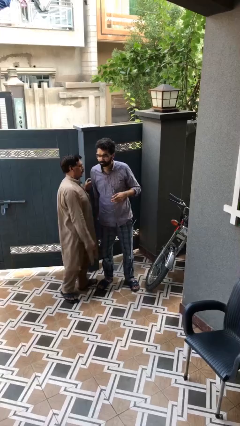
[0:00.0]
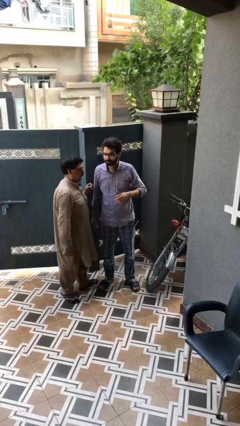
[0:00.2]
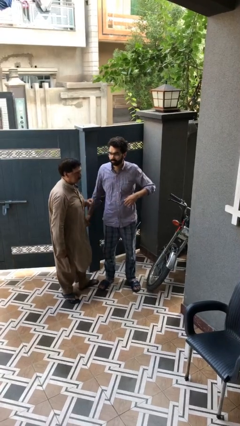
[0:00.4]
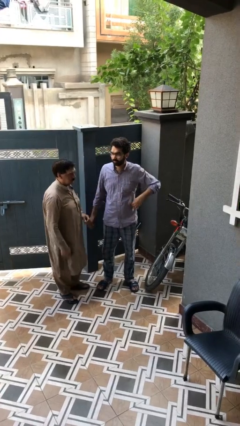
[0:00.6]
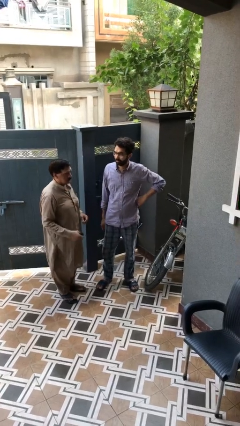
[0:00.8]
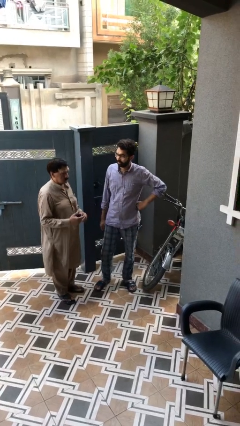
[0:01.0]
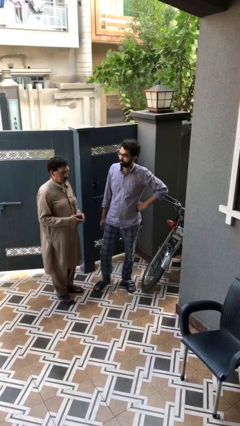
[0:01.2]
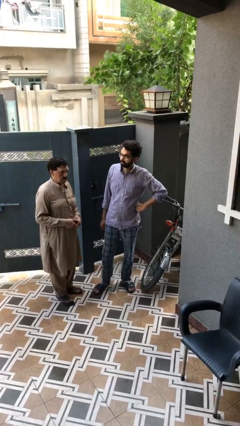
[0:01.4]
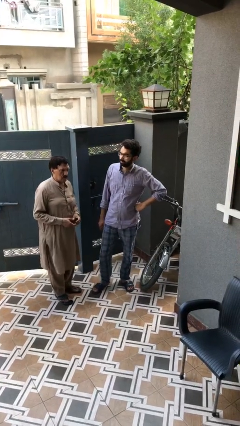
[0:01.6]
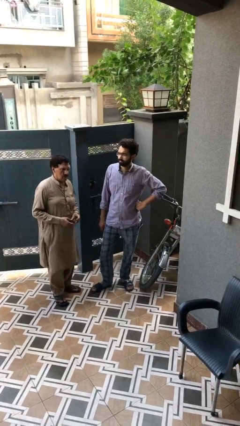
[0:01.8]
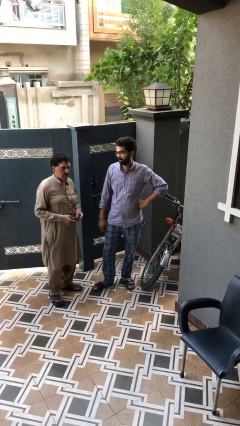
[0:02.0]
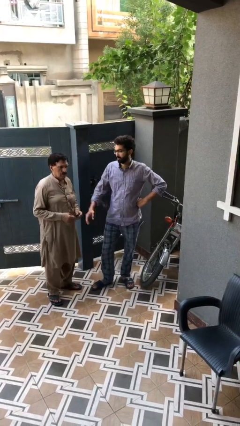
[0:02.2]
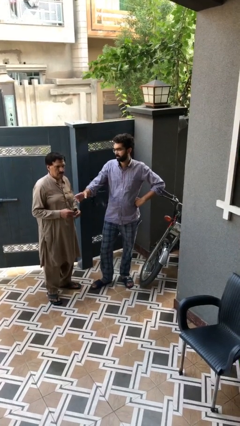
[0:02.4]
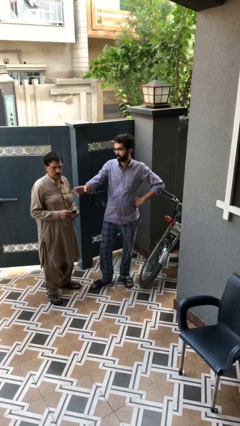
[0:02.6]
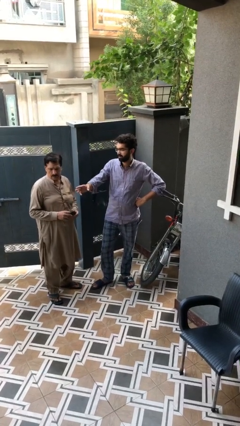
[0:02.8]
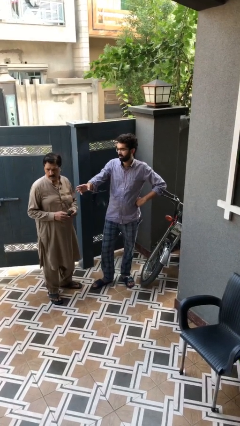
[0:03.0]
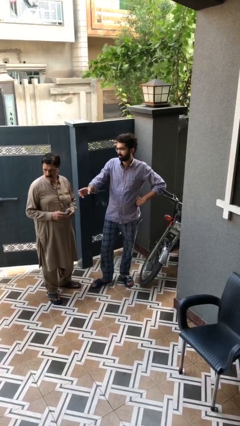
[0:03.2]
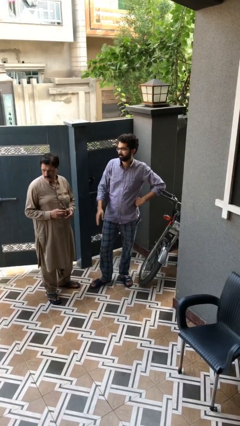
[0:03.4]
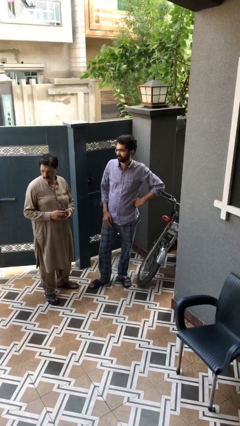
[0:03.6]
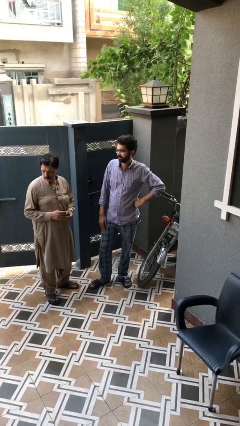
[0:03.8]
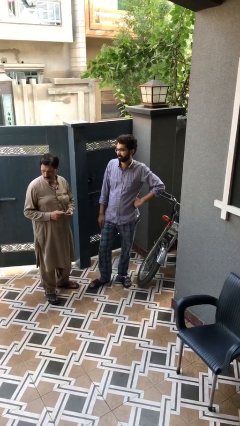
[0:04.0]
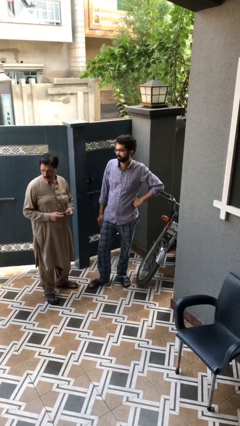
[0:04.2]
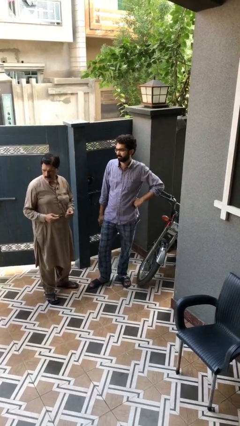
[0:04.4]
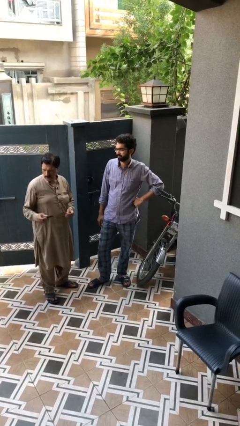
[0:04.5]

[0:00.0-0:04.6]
person talks to person

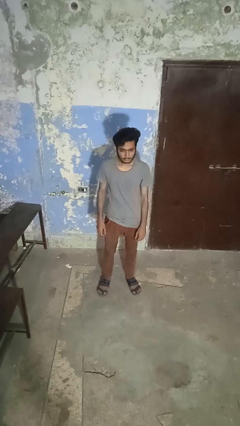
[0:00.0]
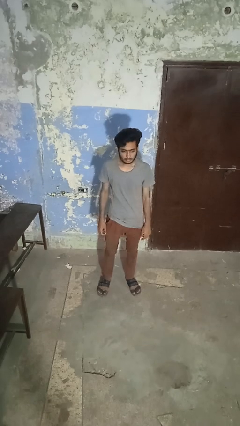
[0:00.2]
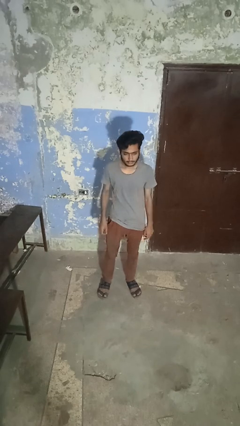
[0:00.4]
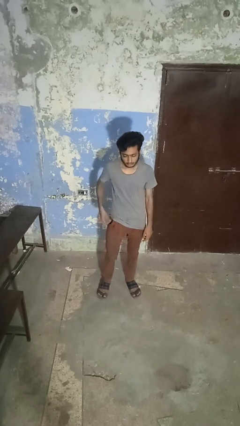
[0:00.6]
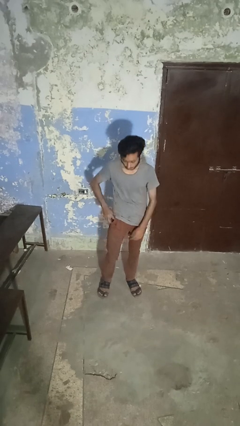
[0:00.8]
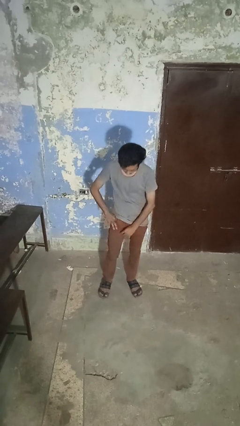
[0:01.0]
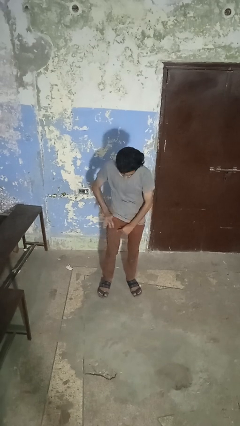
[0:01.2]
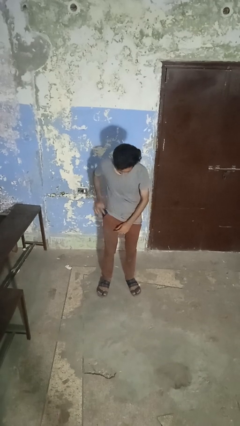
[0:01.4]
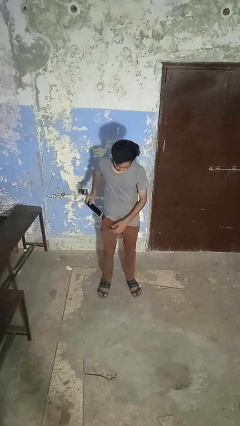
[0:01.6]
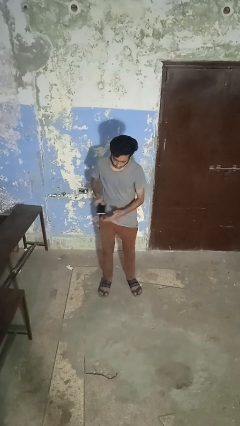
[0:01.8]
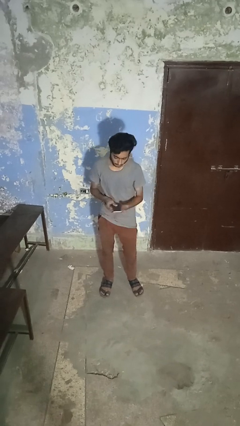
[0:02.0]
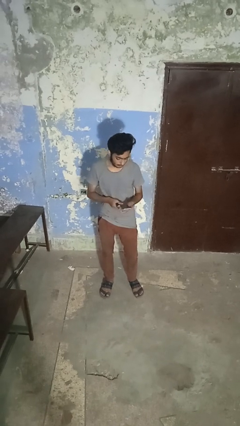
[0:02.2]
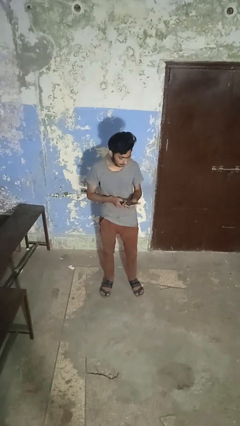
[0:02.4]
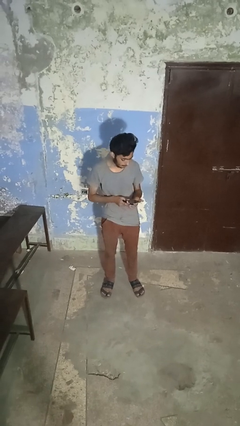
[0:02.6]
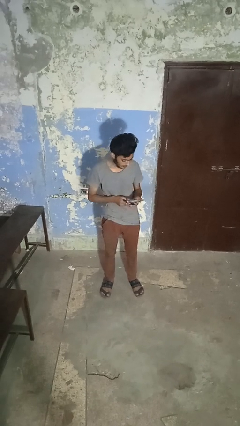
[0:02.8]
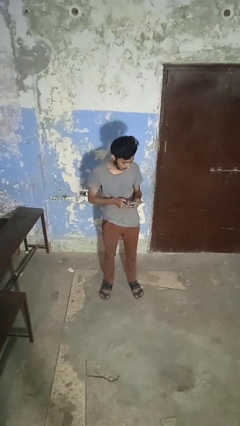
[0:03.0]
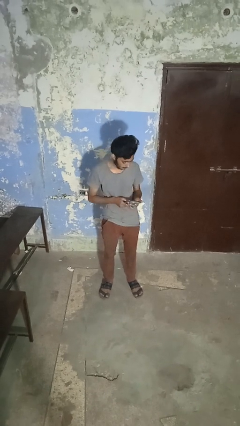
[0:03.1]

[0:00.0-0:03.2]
person takes phone from pocket

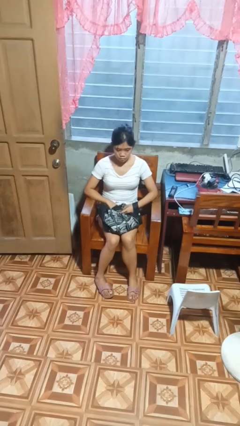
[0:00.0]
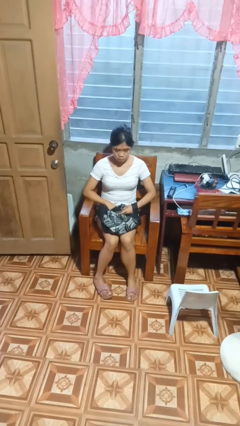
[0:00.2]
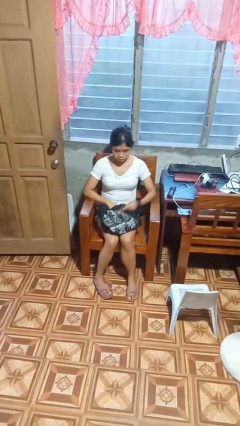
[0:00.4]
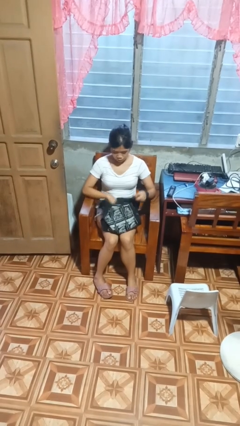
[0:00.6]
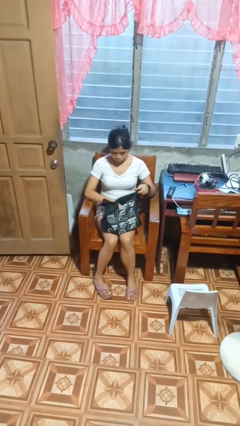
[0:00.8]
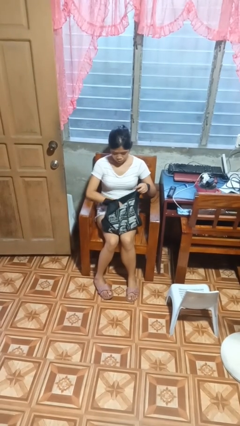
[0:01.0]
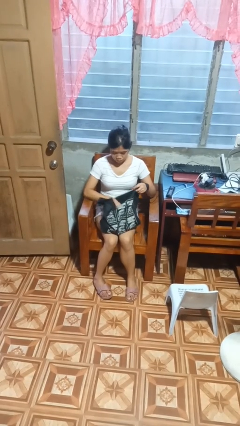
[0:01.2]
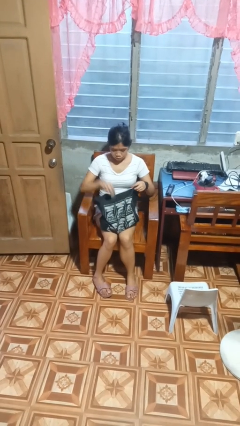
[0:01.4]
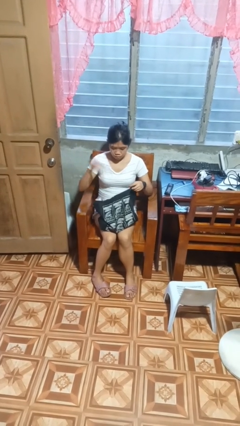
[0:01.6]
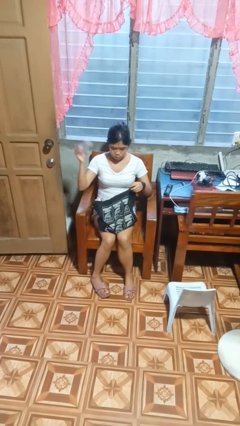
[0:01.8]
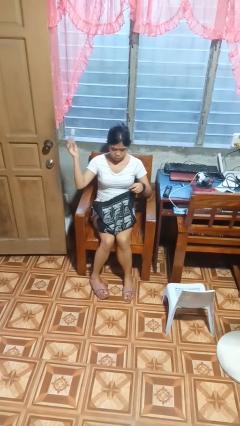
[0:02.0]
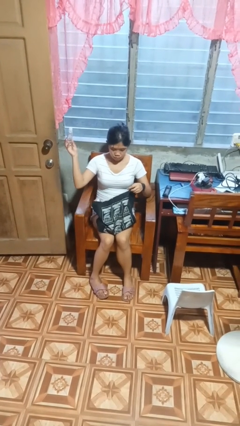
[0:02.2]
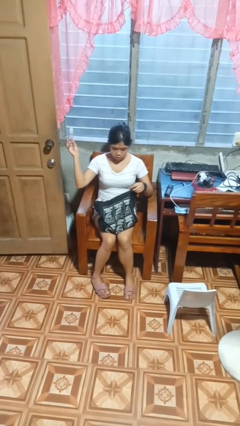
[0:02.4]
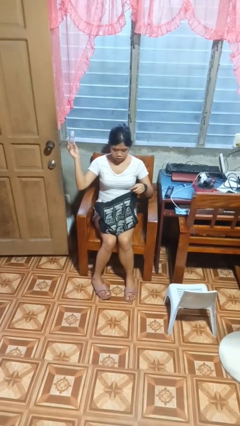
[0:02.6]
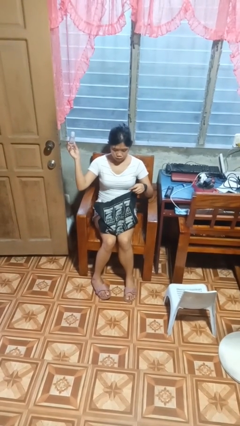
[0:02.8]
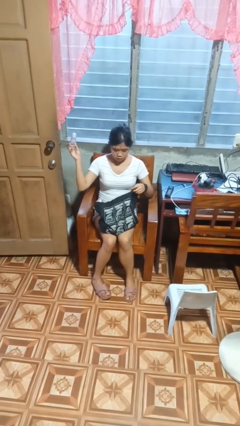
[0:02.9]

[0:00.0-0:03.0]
person searches in bag

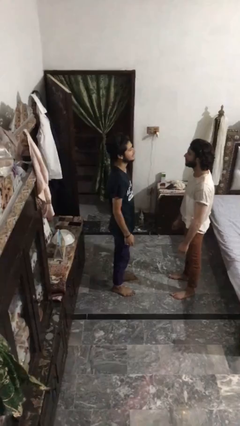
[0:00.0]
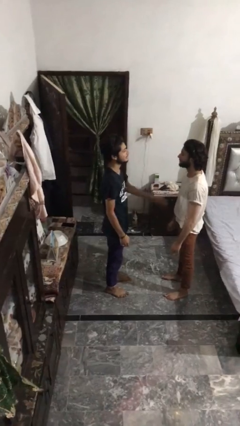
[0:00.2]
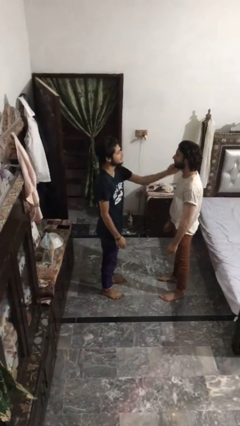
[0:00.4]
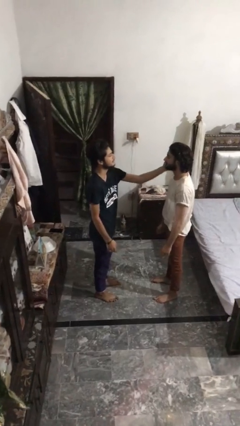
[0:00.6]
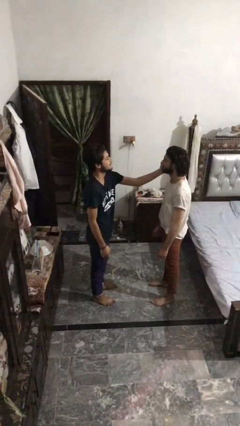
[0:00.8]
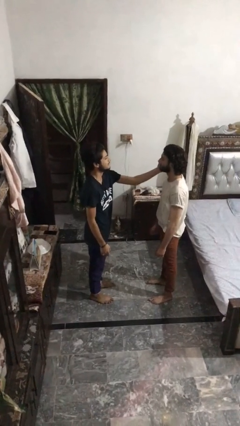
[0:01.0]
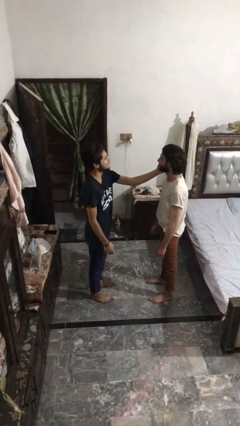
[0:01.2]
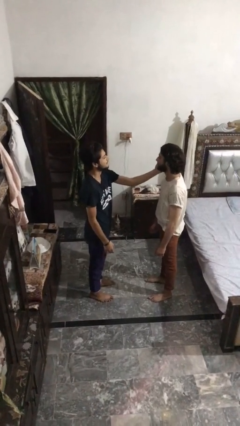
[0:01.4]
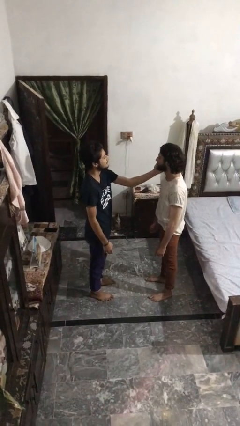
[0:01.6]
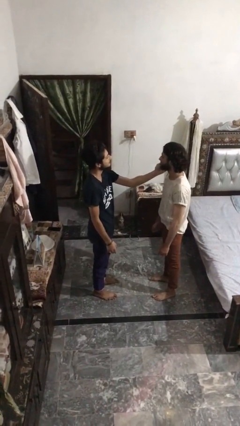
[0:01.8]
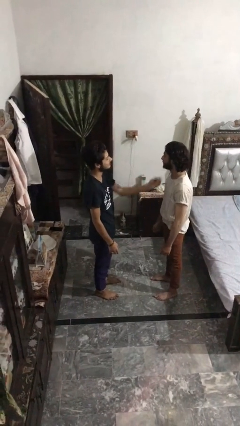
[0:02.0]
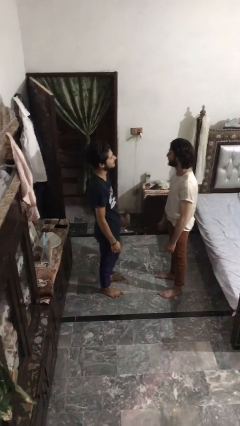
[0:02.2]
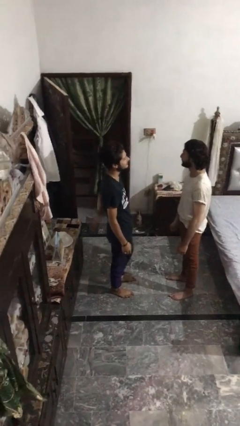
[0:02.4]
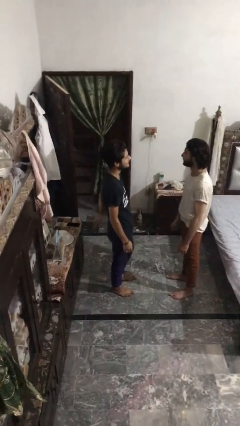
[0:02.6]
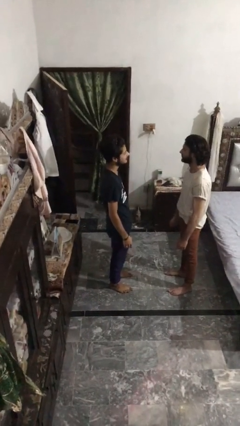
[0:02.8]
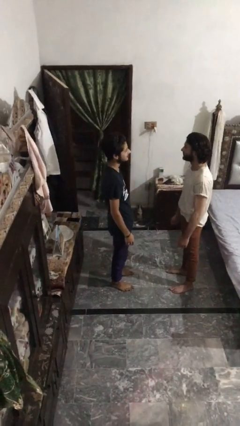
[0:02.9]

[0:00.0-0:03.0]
person touches face of person

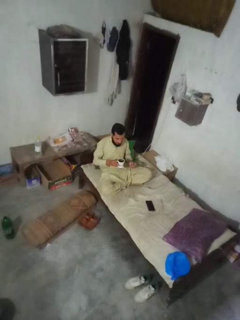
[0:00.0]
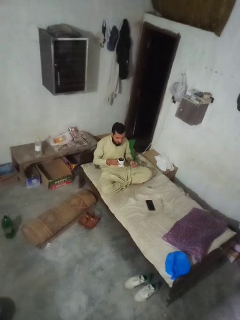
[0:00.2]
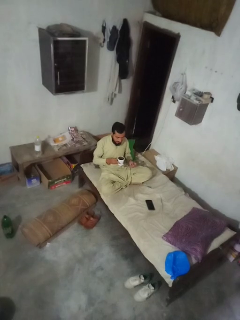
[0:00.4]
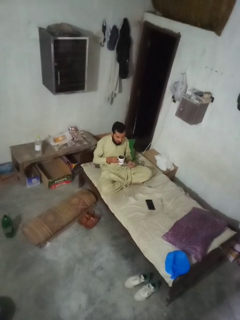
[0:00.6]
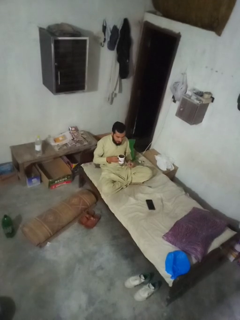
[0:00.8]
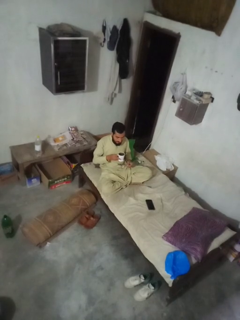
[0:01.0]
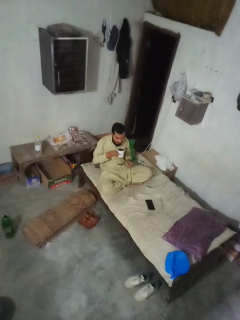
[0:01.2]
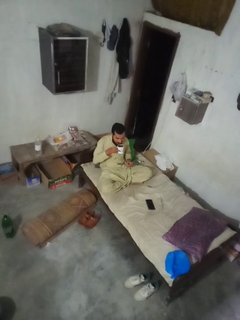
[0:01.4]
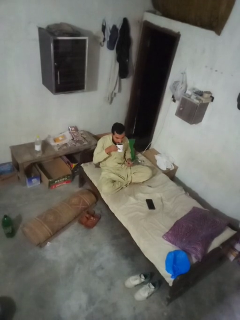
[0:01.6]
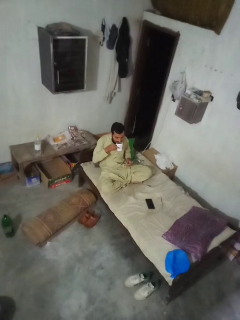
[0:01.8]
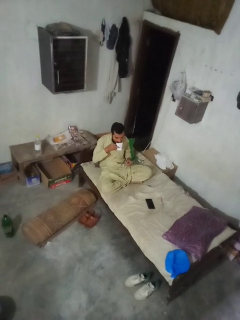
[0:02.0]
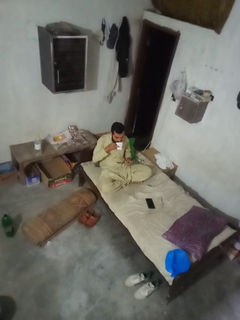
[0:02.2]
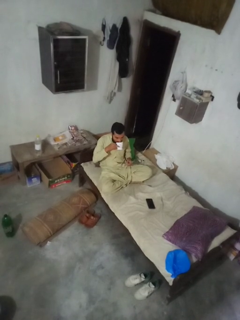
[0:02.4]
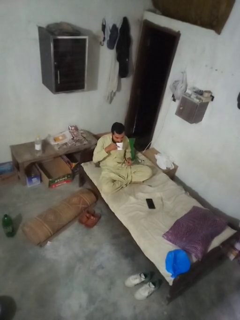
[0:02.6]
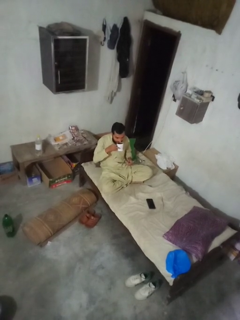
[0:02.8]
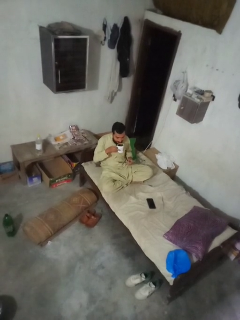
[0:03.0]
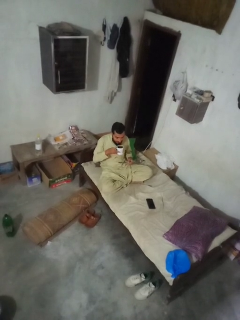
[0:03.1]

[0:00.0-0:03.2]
person drinks from mug

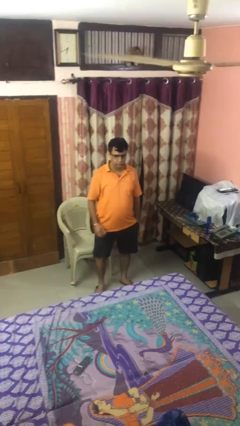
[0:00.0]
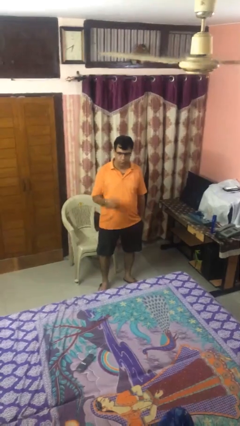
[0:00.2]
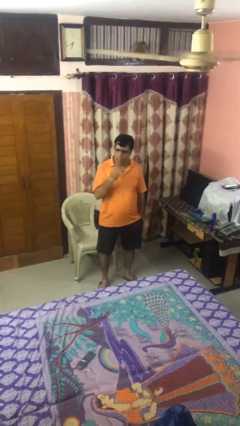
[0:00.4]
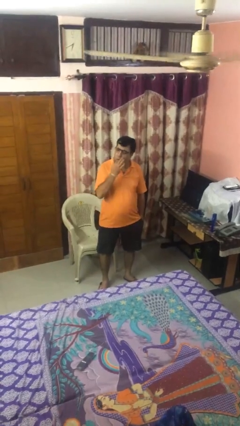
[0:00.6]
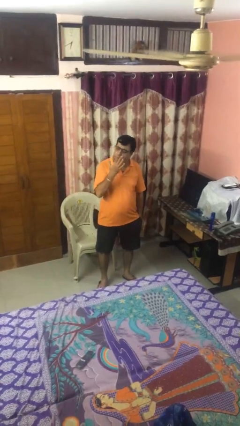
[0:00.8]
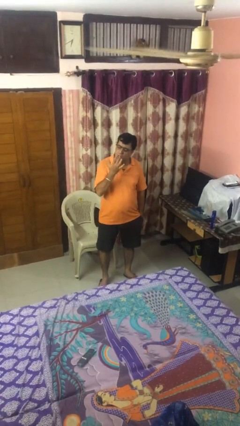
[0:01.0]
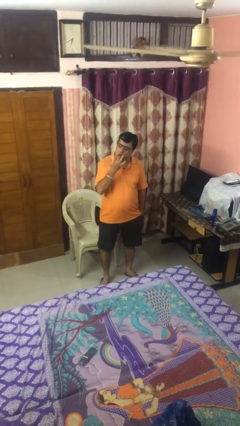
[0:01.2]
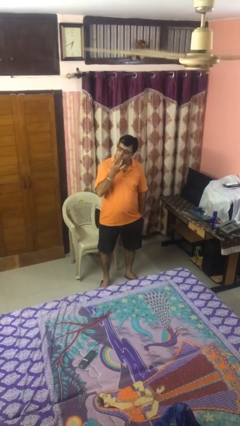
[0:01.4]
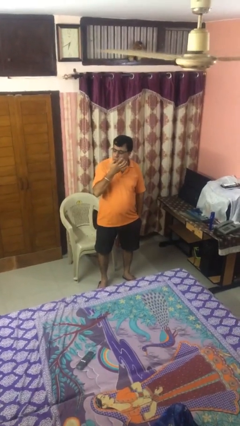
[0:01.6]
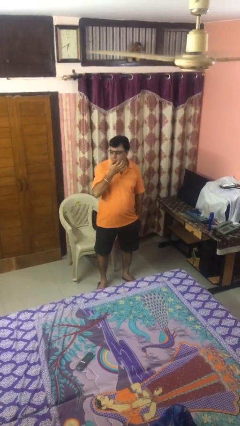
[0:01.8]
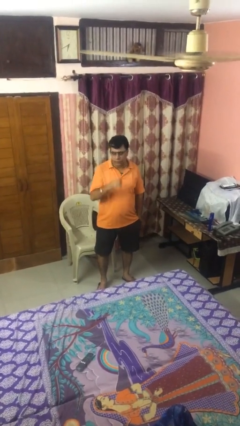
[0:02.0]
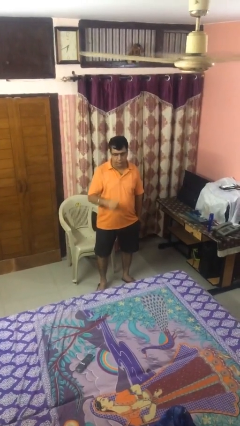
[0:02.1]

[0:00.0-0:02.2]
person licks fingers
